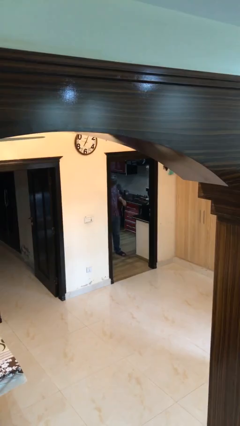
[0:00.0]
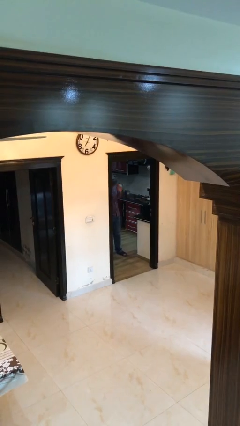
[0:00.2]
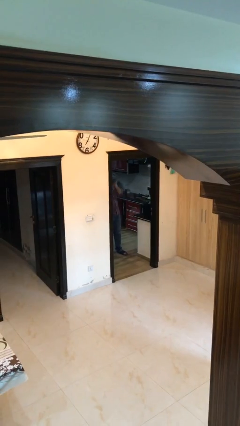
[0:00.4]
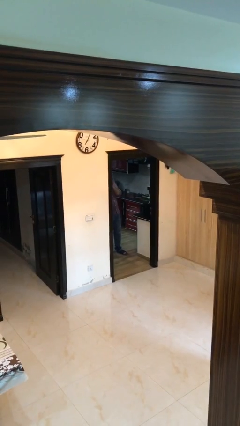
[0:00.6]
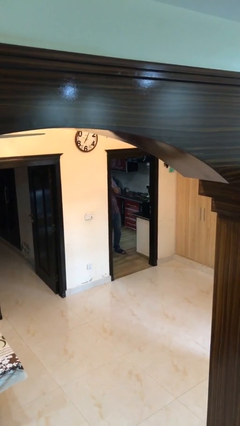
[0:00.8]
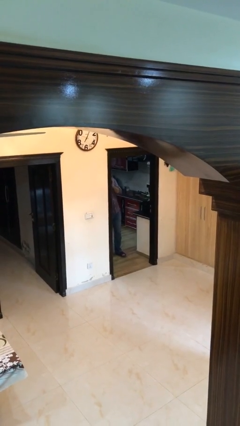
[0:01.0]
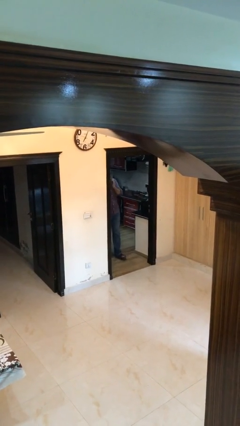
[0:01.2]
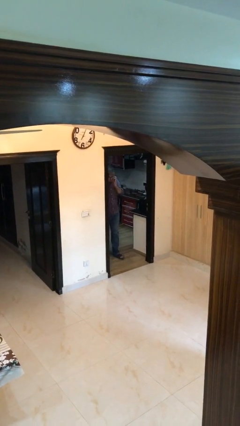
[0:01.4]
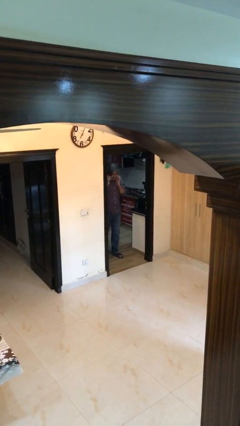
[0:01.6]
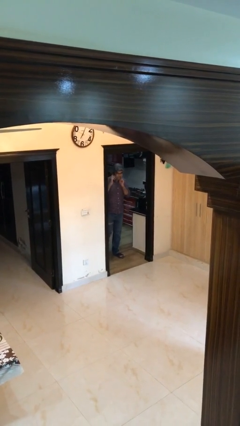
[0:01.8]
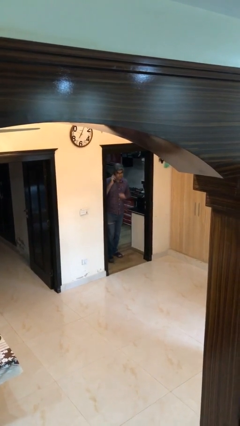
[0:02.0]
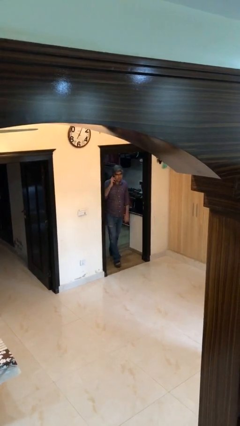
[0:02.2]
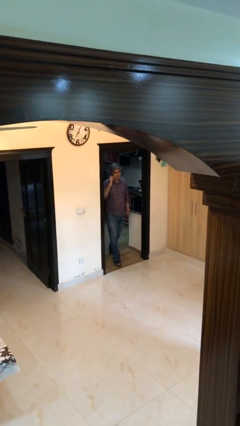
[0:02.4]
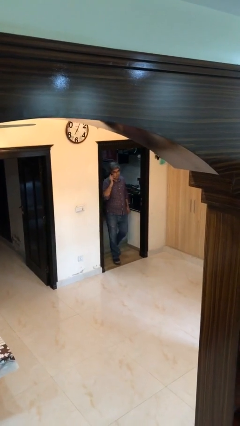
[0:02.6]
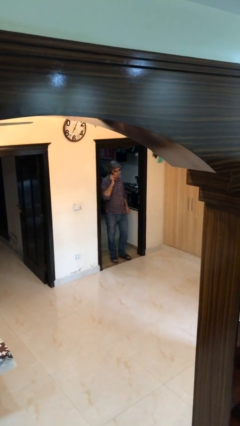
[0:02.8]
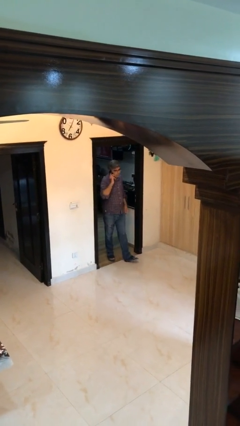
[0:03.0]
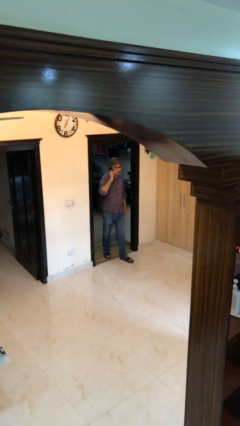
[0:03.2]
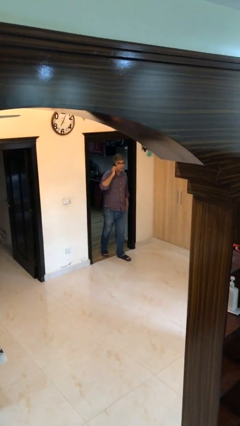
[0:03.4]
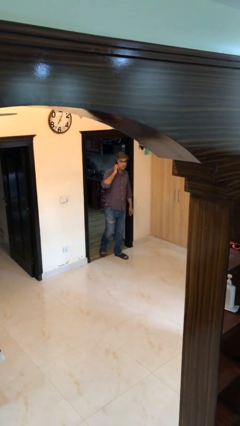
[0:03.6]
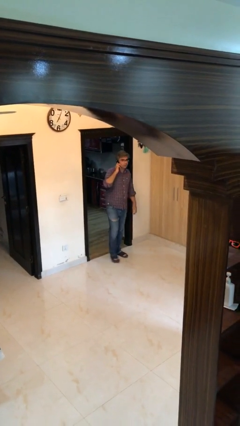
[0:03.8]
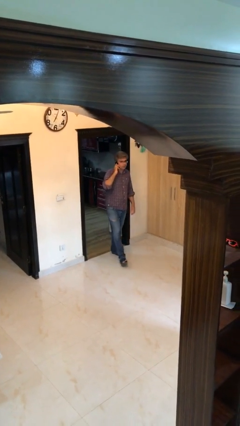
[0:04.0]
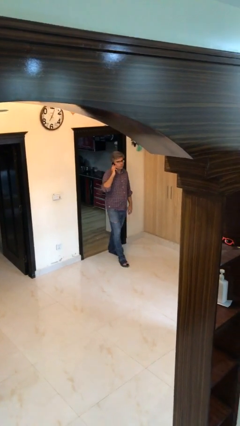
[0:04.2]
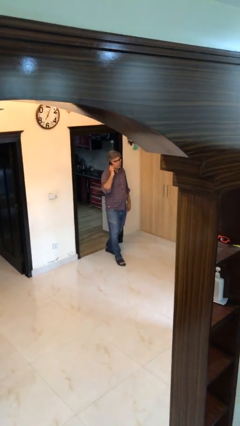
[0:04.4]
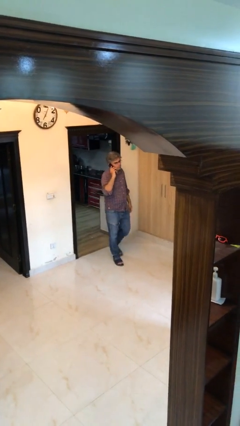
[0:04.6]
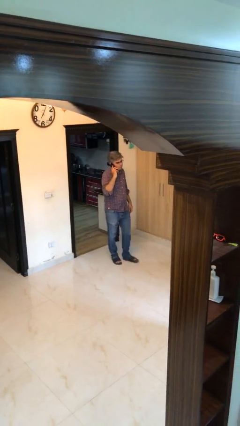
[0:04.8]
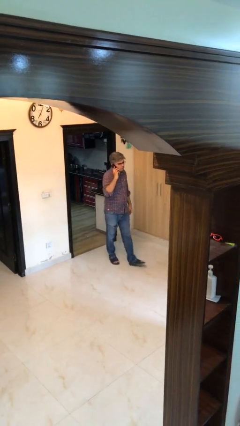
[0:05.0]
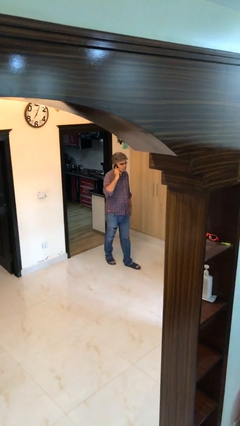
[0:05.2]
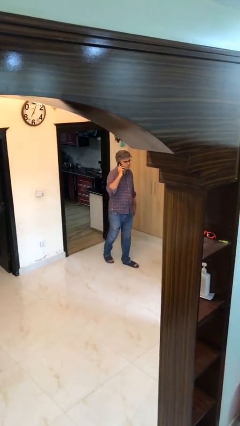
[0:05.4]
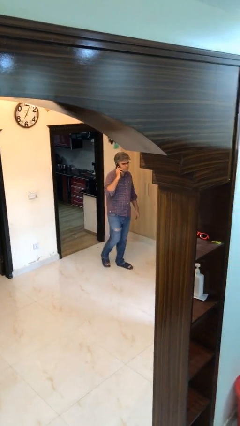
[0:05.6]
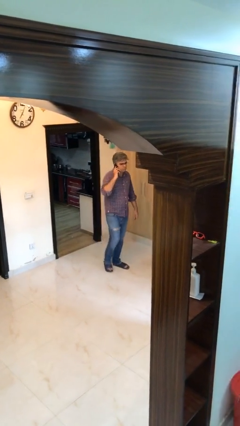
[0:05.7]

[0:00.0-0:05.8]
person enters scene through structure

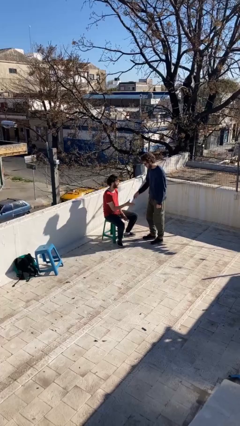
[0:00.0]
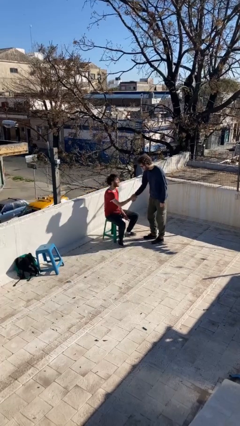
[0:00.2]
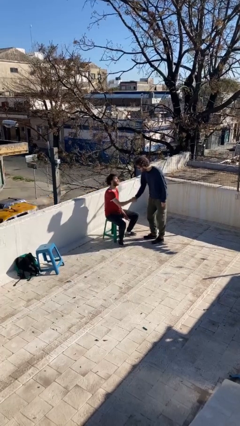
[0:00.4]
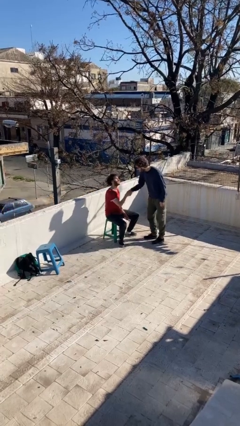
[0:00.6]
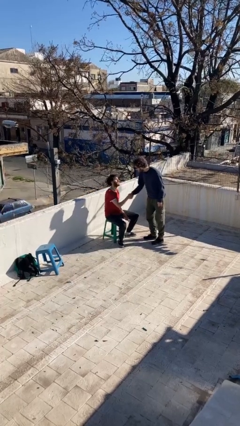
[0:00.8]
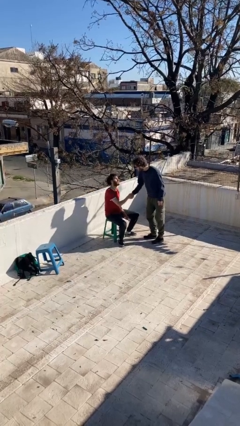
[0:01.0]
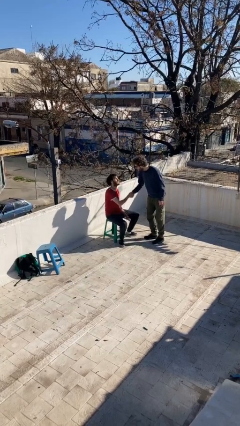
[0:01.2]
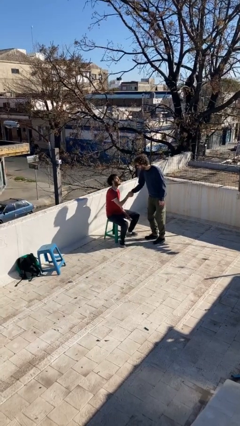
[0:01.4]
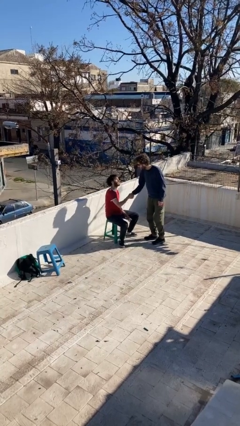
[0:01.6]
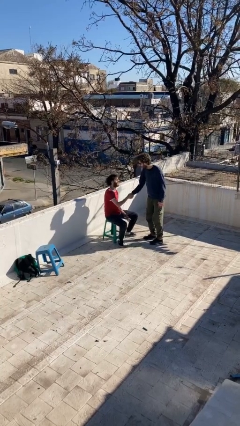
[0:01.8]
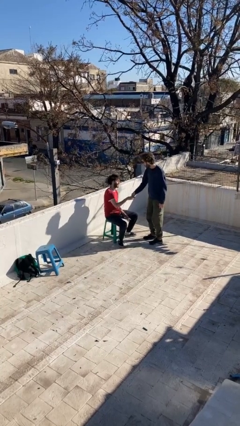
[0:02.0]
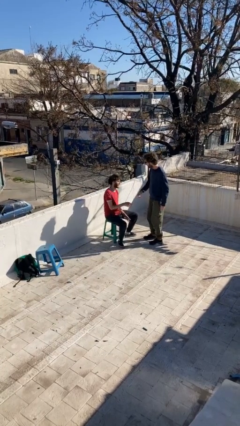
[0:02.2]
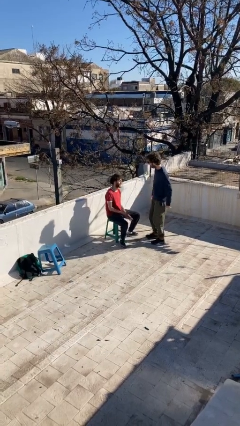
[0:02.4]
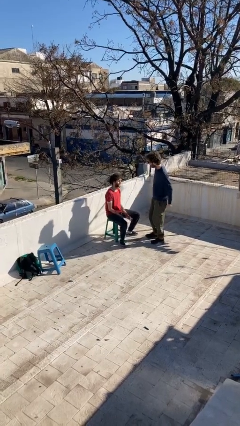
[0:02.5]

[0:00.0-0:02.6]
person shakes hand

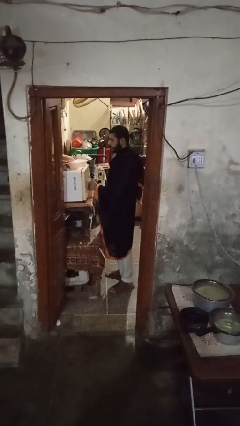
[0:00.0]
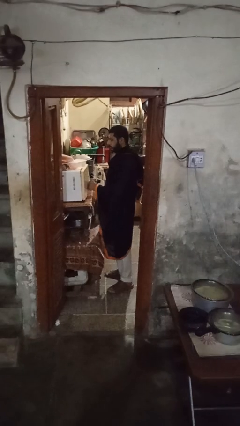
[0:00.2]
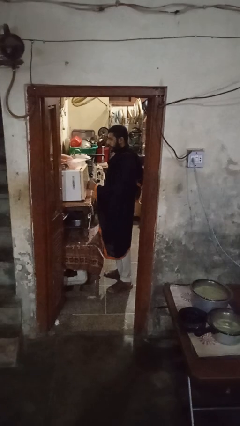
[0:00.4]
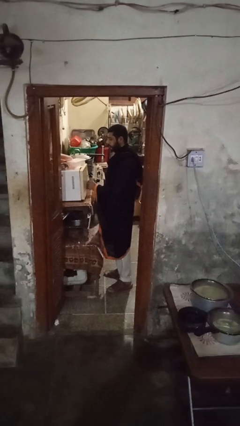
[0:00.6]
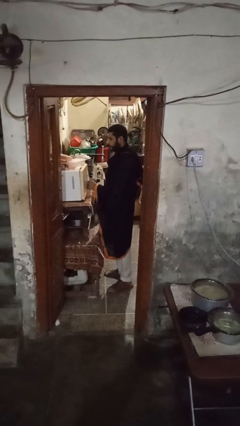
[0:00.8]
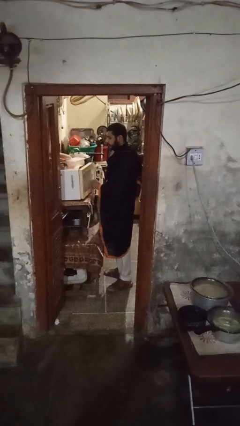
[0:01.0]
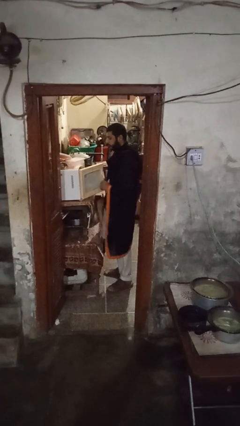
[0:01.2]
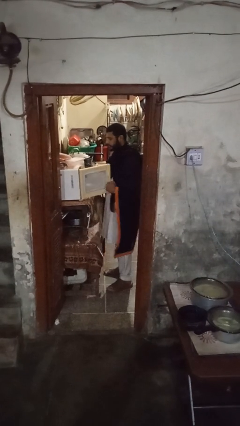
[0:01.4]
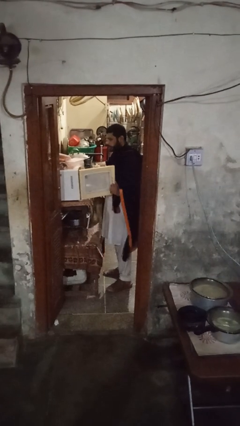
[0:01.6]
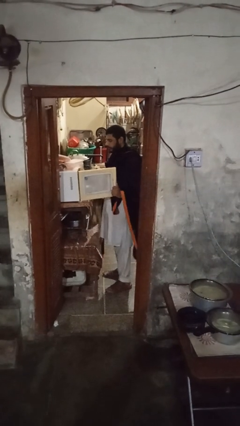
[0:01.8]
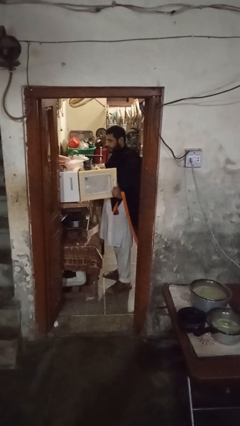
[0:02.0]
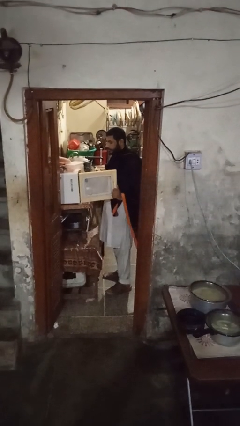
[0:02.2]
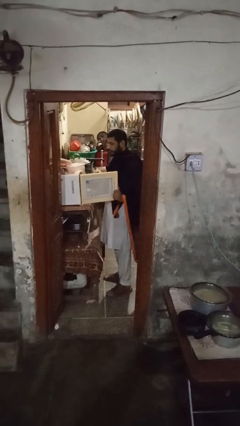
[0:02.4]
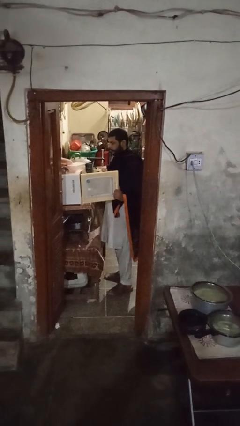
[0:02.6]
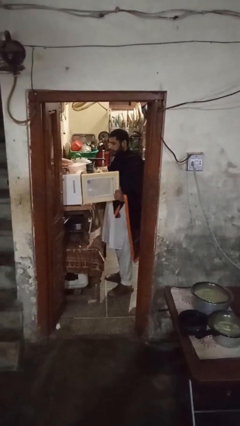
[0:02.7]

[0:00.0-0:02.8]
person opens microwave

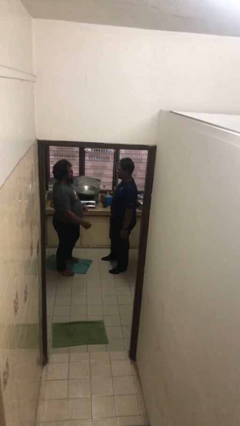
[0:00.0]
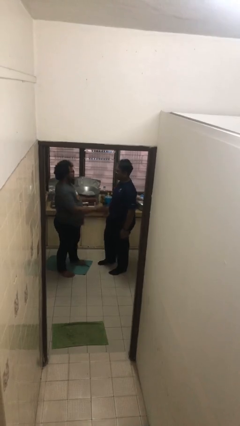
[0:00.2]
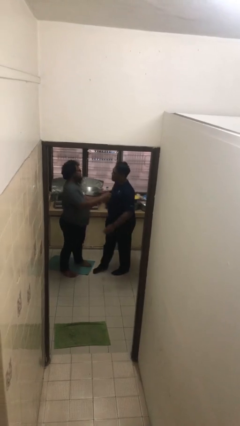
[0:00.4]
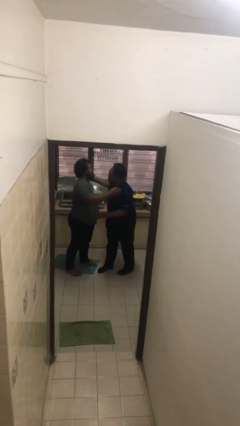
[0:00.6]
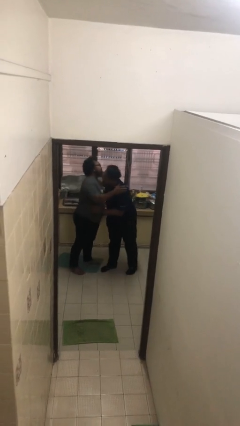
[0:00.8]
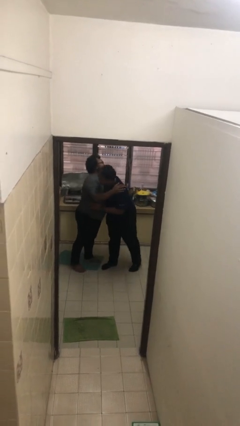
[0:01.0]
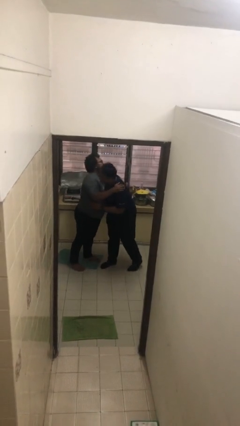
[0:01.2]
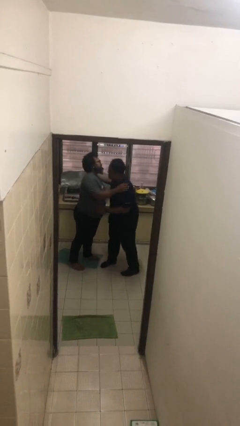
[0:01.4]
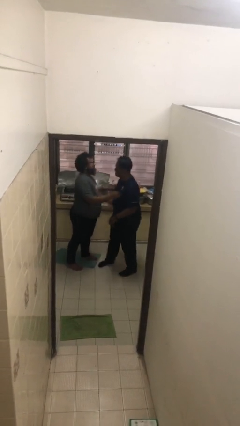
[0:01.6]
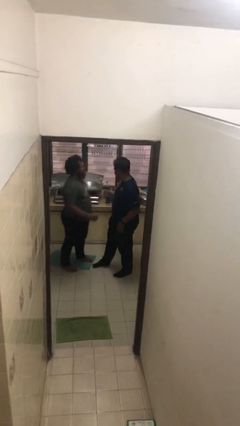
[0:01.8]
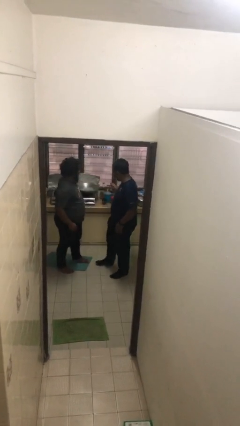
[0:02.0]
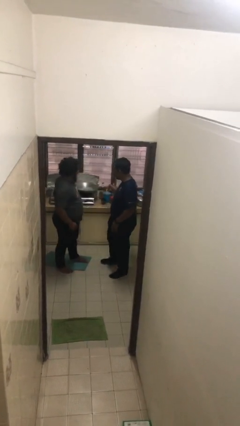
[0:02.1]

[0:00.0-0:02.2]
person embraces person

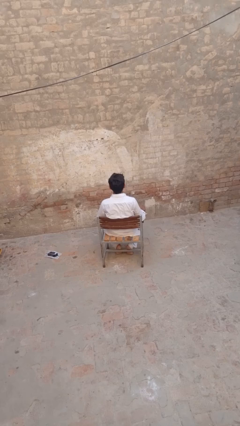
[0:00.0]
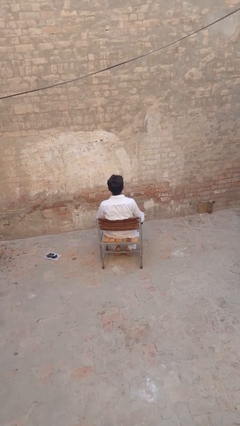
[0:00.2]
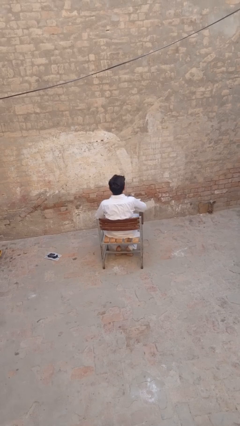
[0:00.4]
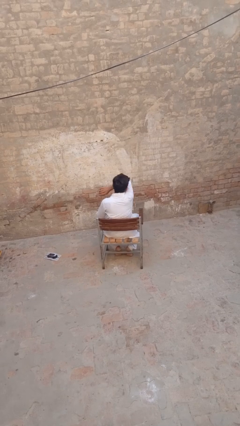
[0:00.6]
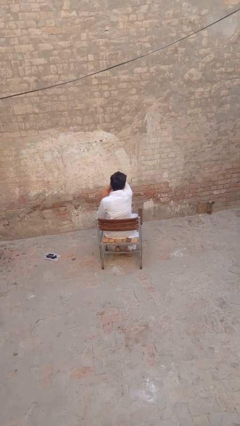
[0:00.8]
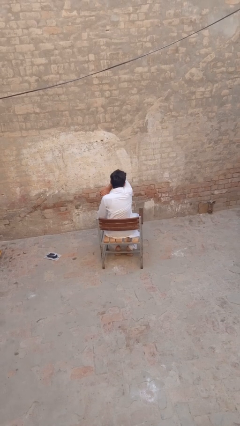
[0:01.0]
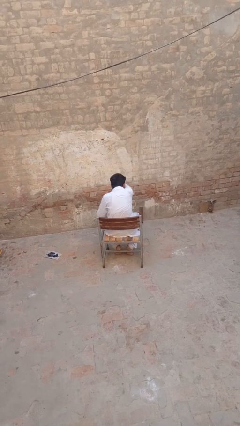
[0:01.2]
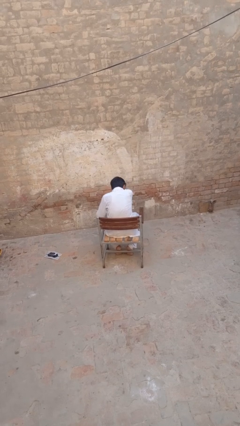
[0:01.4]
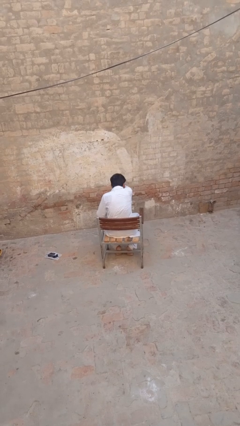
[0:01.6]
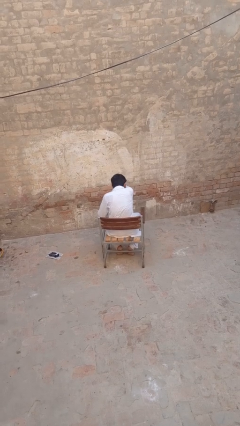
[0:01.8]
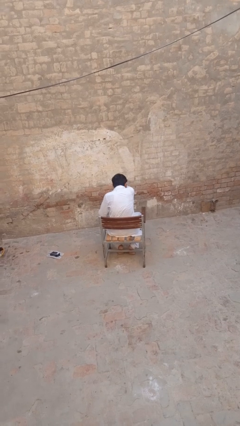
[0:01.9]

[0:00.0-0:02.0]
person sneezes into arm

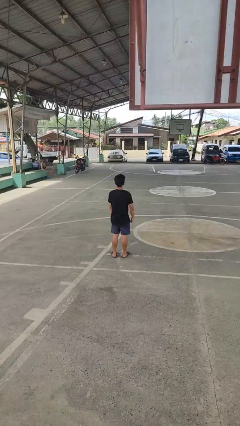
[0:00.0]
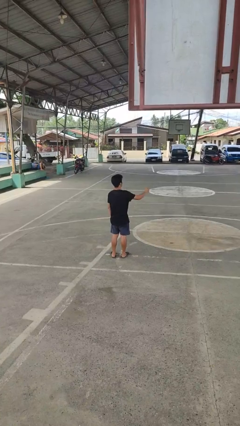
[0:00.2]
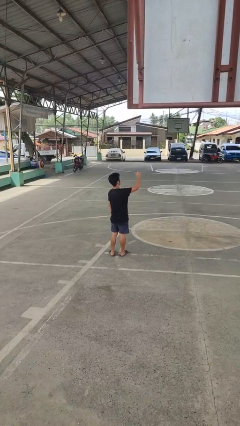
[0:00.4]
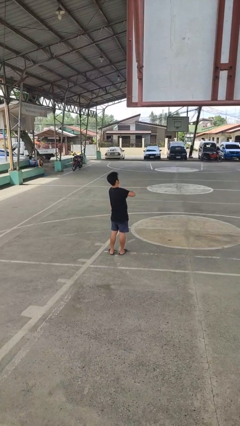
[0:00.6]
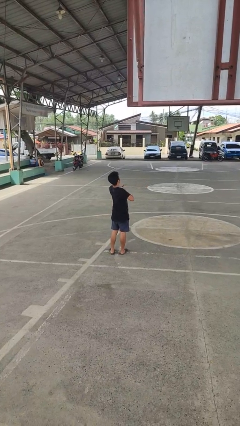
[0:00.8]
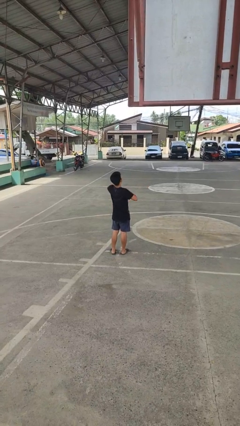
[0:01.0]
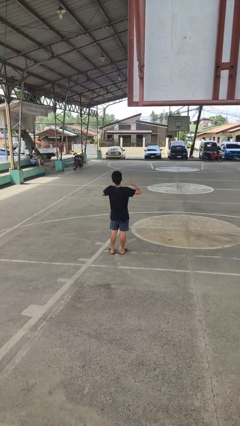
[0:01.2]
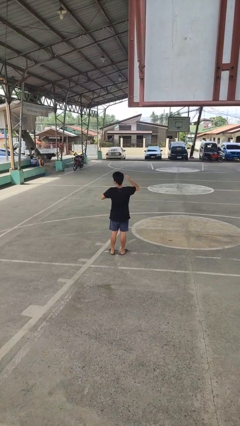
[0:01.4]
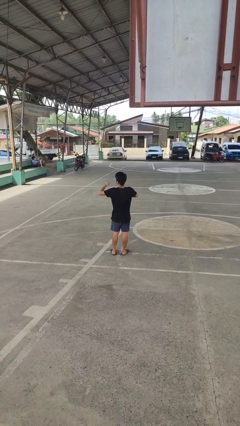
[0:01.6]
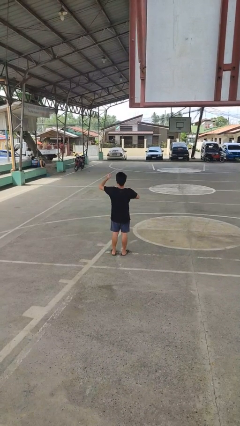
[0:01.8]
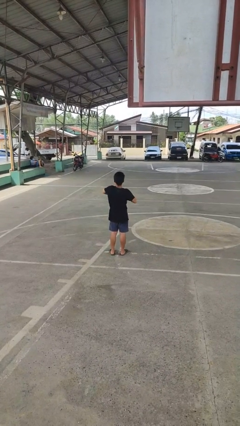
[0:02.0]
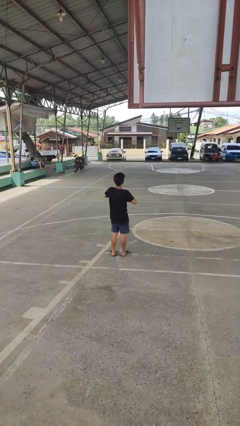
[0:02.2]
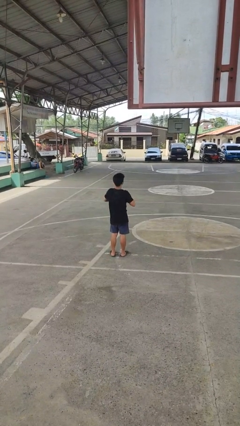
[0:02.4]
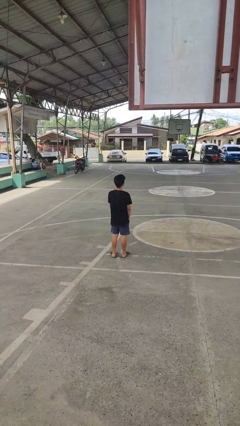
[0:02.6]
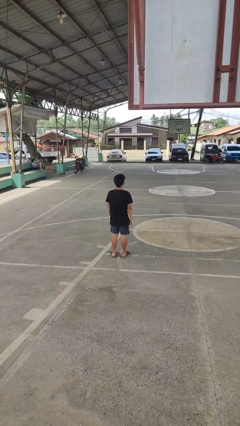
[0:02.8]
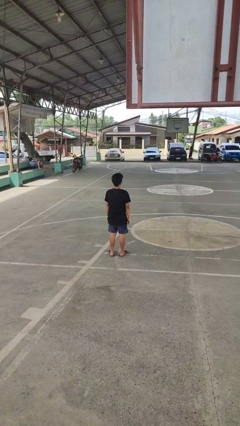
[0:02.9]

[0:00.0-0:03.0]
person drums on chest
